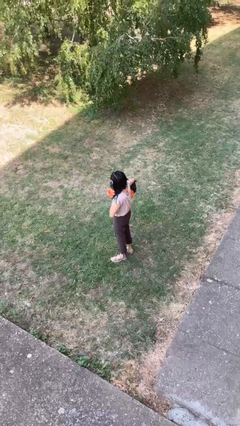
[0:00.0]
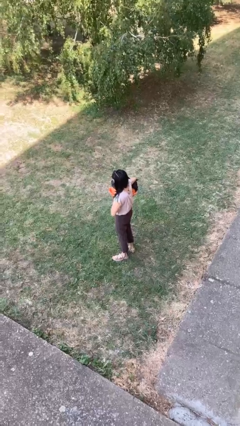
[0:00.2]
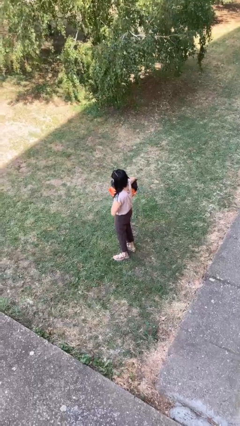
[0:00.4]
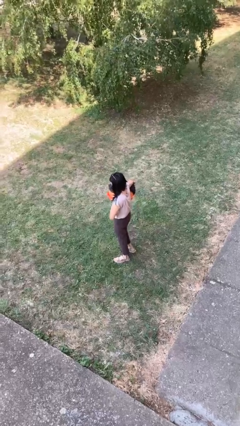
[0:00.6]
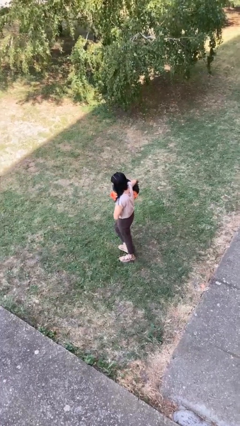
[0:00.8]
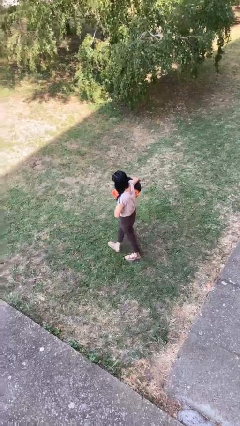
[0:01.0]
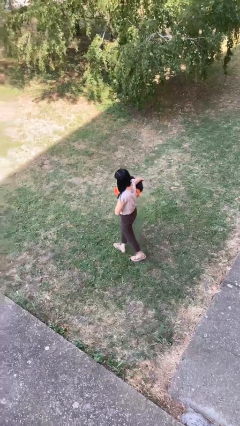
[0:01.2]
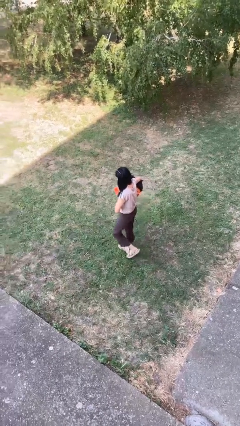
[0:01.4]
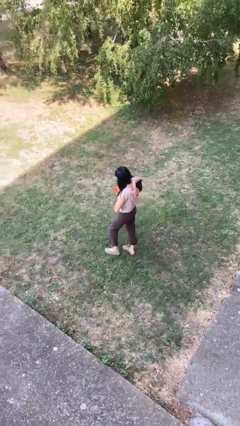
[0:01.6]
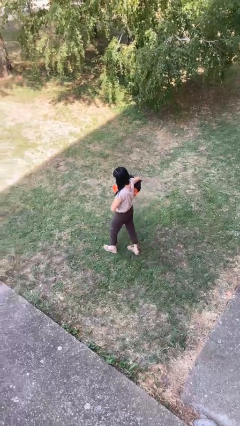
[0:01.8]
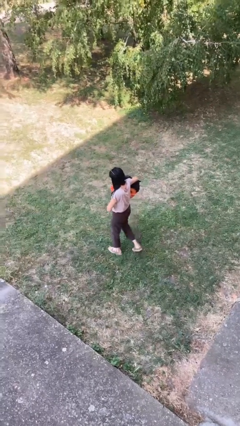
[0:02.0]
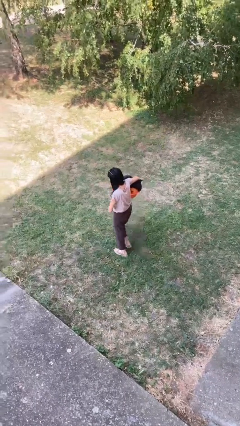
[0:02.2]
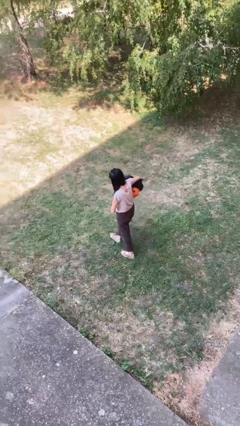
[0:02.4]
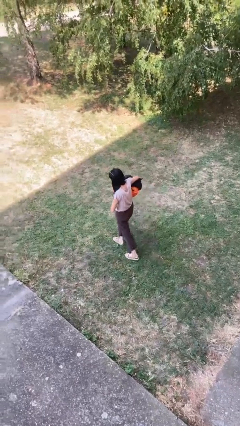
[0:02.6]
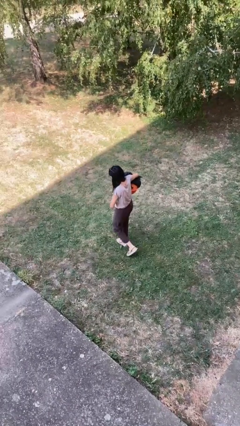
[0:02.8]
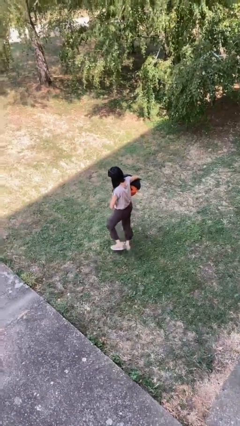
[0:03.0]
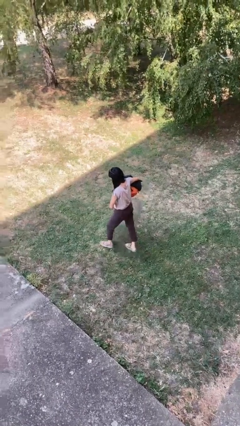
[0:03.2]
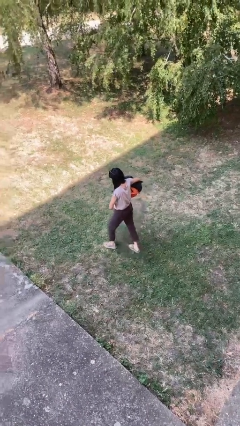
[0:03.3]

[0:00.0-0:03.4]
person carries laundry basket

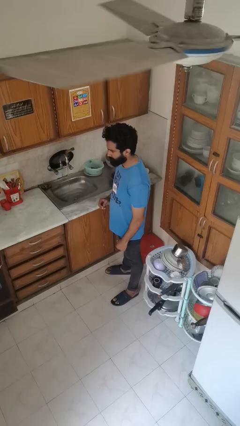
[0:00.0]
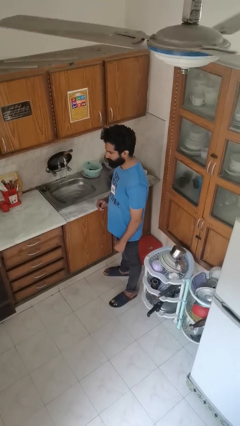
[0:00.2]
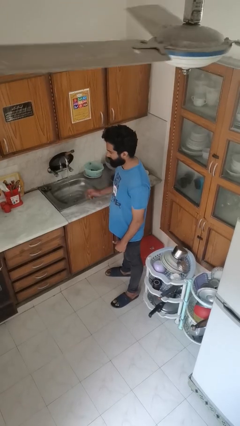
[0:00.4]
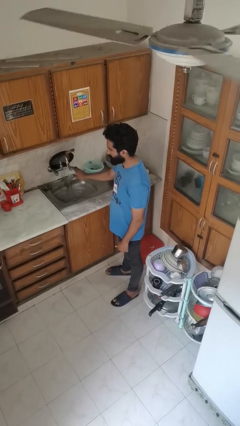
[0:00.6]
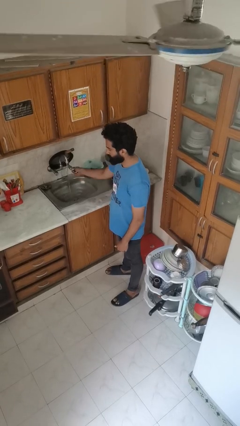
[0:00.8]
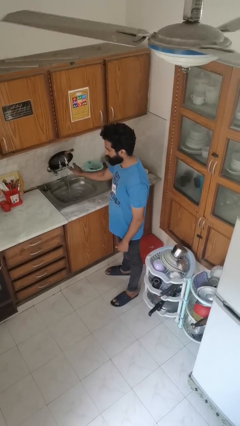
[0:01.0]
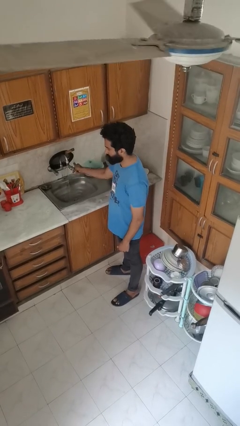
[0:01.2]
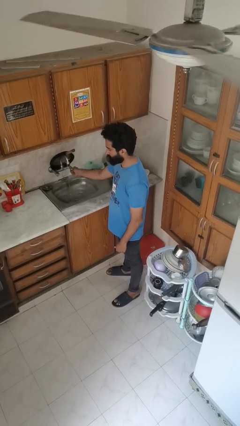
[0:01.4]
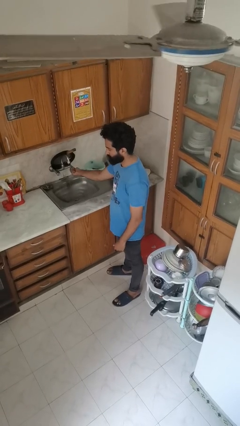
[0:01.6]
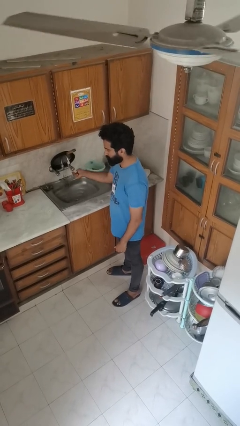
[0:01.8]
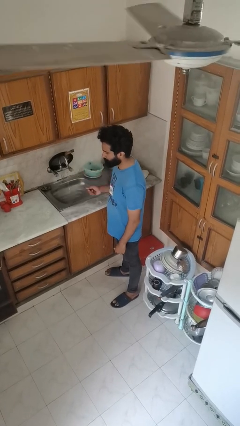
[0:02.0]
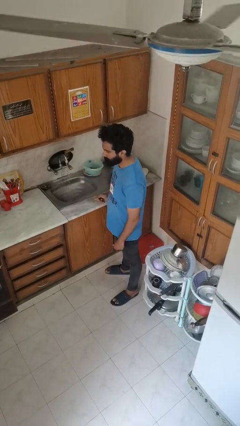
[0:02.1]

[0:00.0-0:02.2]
person turns off faucet

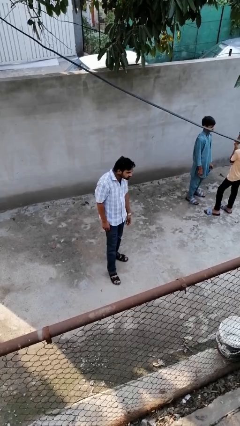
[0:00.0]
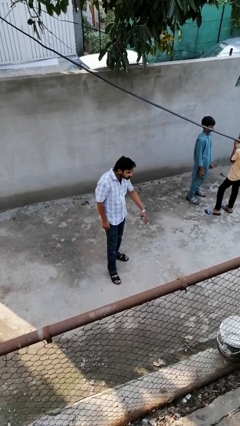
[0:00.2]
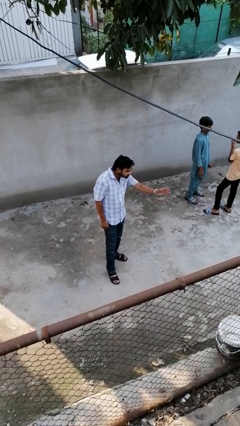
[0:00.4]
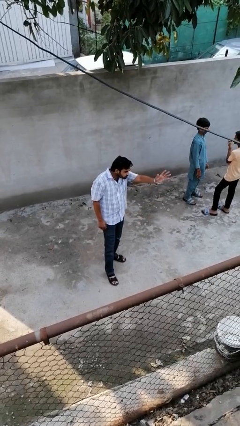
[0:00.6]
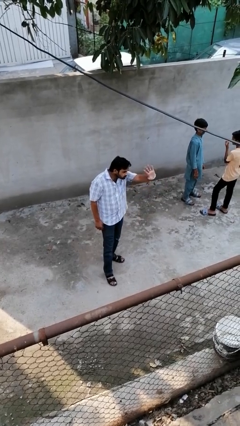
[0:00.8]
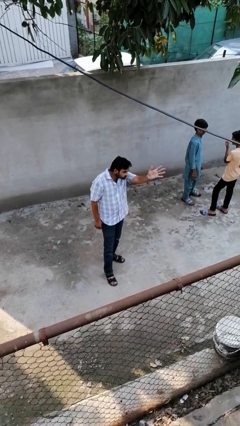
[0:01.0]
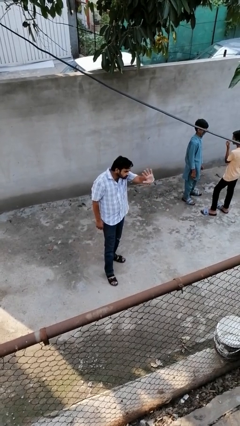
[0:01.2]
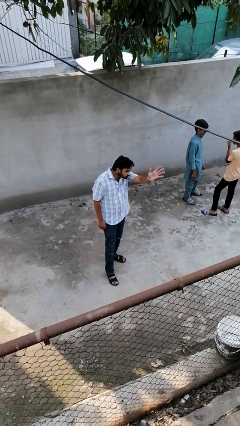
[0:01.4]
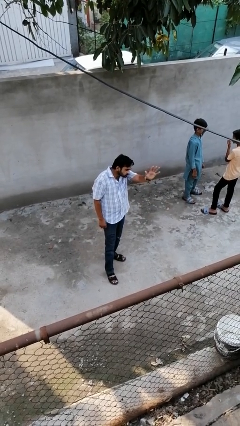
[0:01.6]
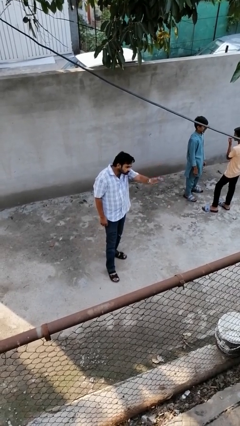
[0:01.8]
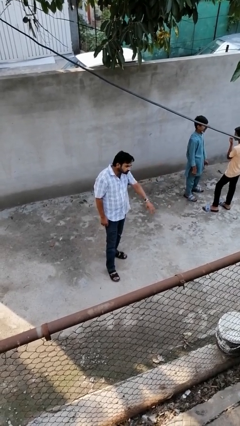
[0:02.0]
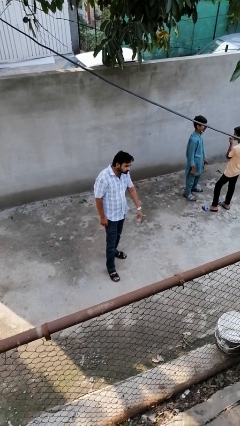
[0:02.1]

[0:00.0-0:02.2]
person waves at person

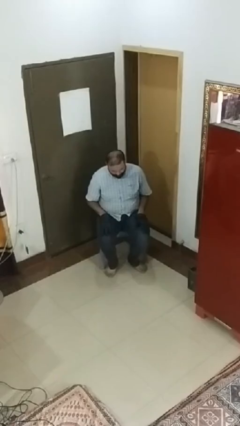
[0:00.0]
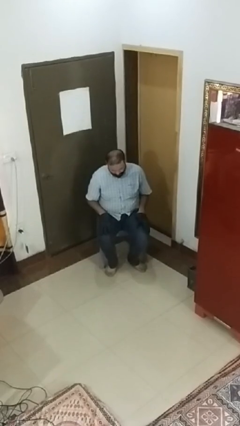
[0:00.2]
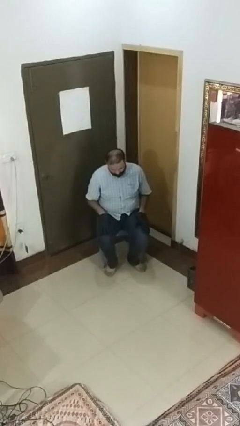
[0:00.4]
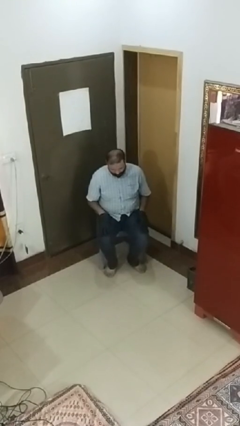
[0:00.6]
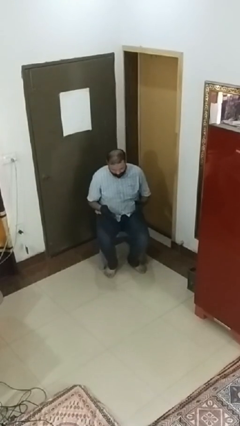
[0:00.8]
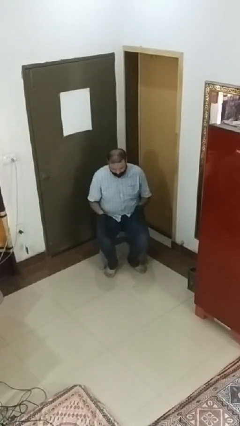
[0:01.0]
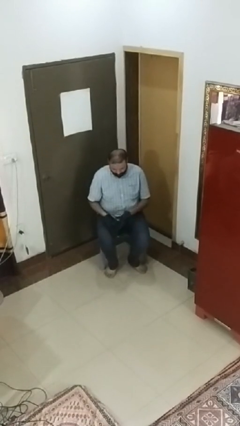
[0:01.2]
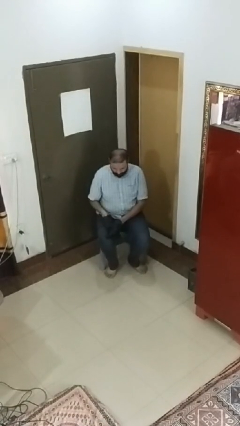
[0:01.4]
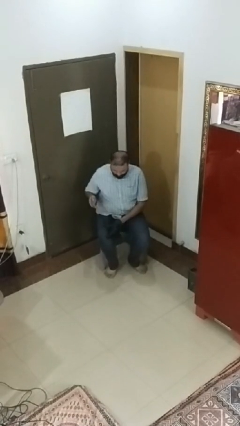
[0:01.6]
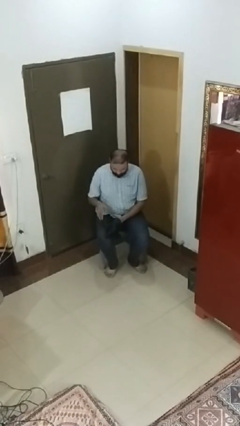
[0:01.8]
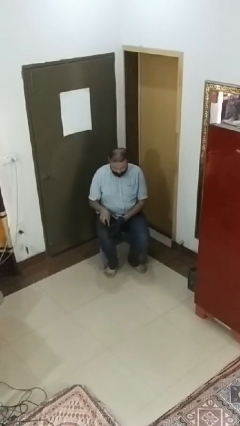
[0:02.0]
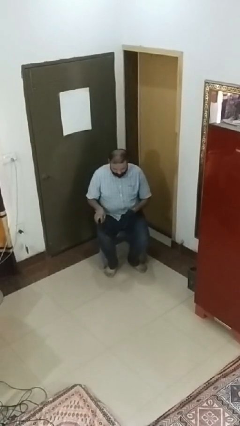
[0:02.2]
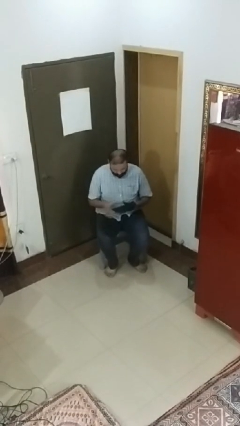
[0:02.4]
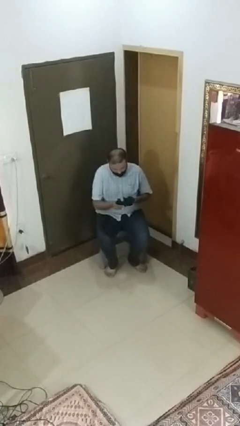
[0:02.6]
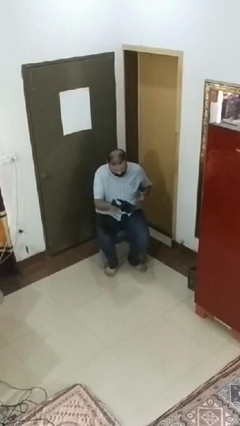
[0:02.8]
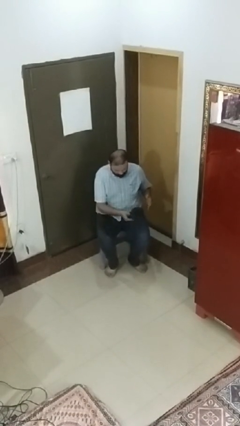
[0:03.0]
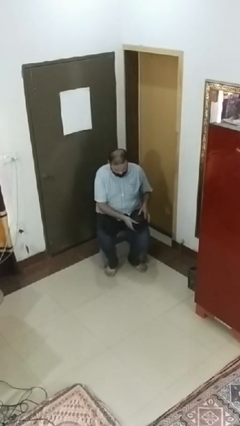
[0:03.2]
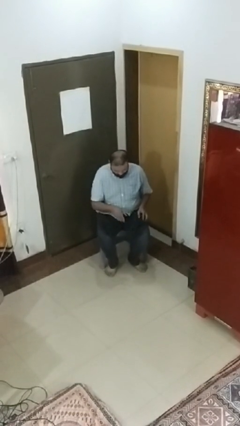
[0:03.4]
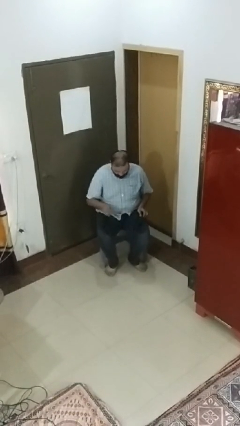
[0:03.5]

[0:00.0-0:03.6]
person takes off gloves

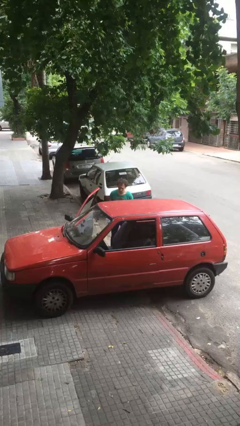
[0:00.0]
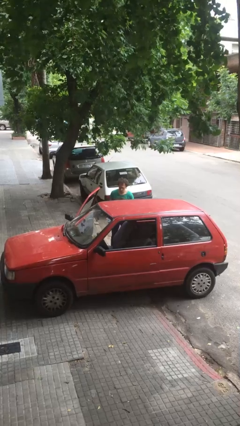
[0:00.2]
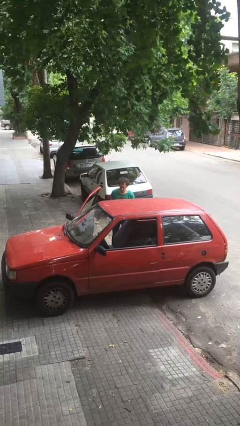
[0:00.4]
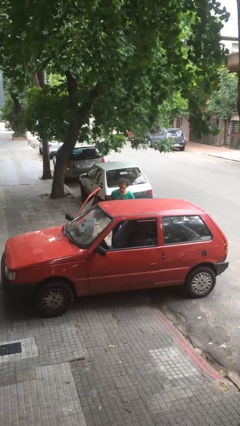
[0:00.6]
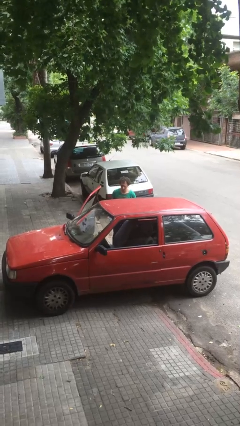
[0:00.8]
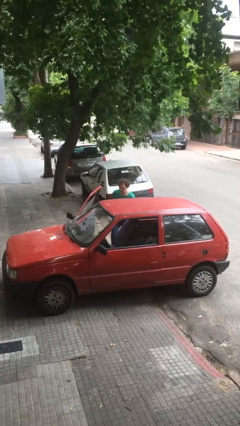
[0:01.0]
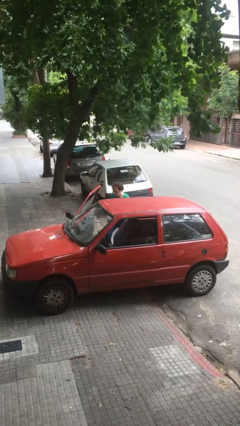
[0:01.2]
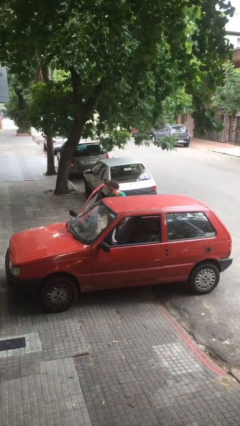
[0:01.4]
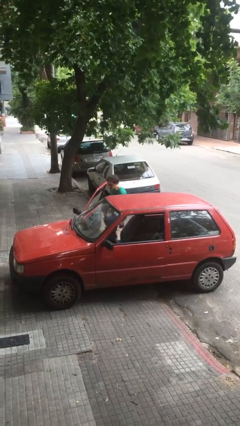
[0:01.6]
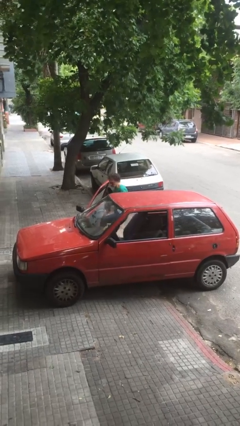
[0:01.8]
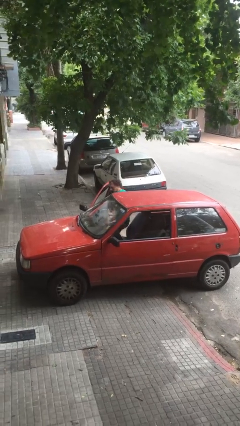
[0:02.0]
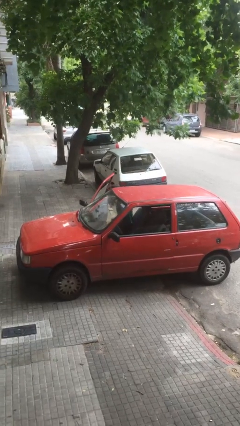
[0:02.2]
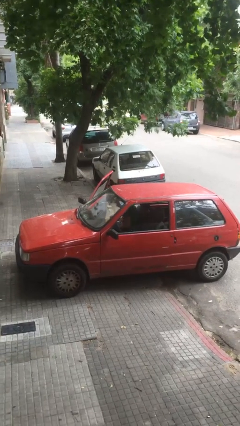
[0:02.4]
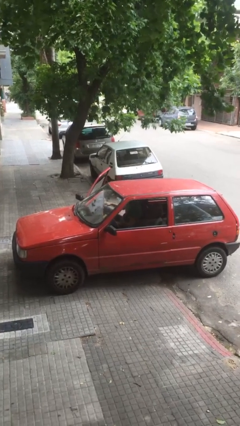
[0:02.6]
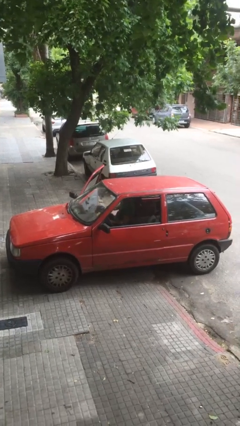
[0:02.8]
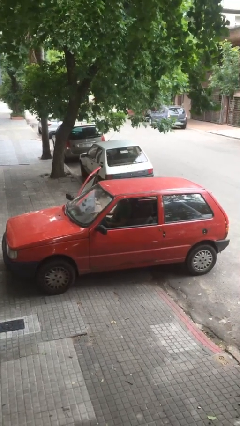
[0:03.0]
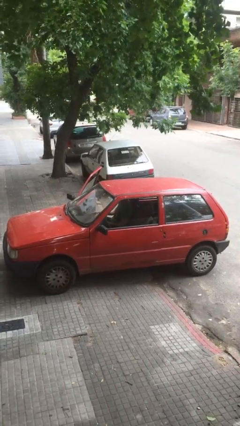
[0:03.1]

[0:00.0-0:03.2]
person enters car

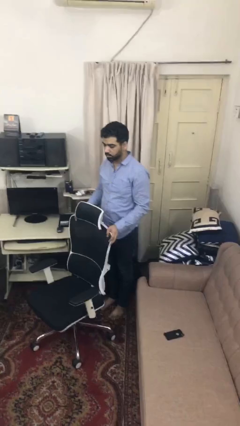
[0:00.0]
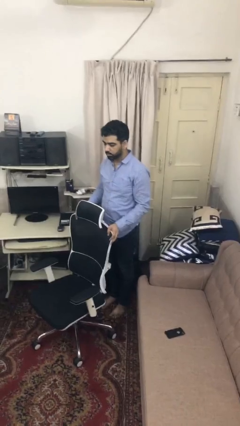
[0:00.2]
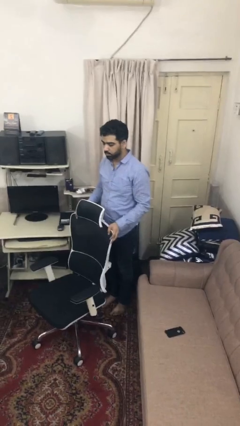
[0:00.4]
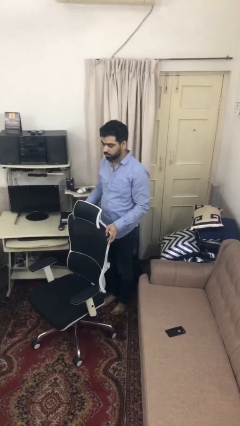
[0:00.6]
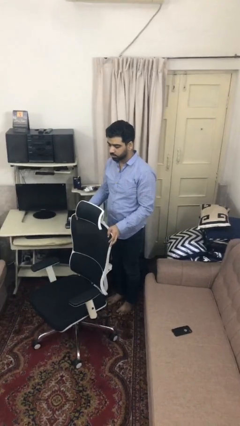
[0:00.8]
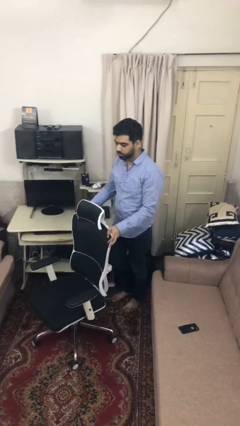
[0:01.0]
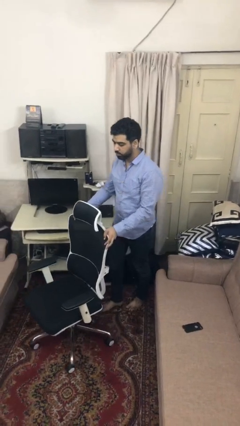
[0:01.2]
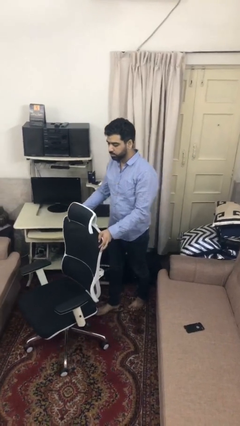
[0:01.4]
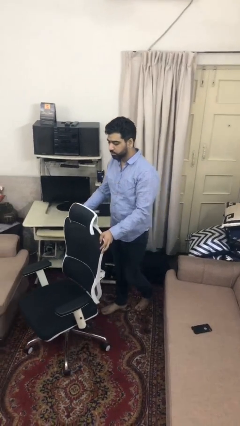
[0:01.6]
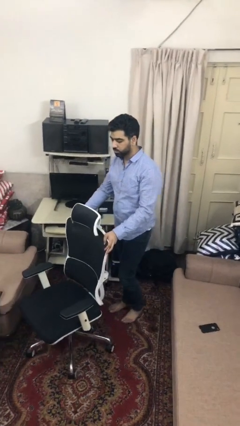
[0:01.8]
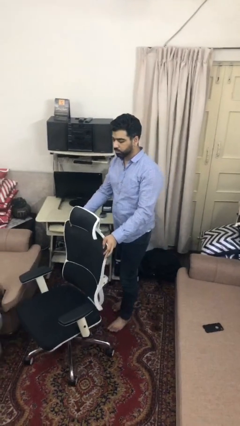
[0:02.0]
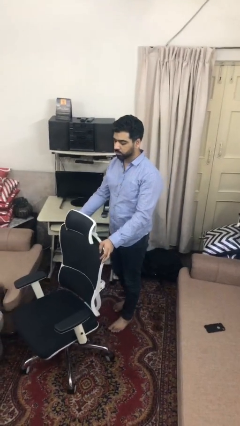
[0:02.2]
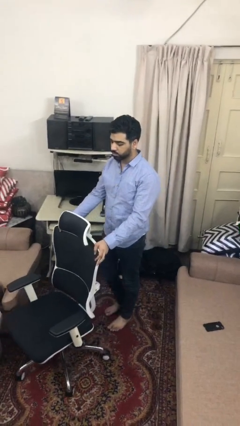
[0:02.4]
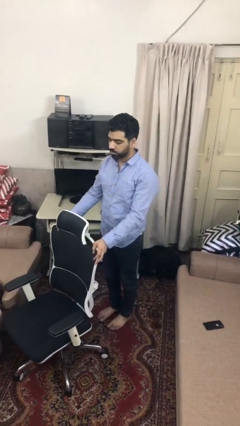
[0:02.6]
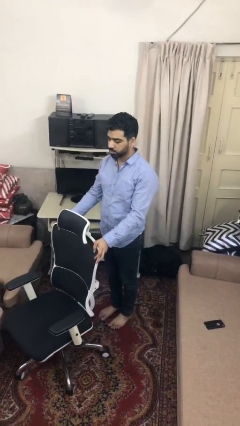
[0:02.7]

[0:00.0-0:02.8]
person pushes wheeled cart
